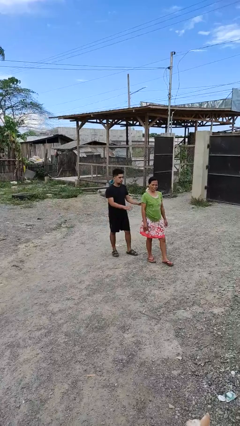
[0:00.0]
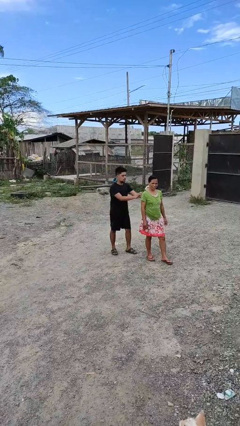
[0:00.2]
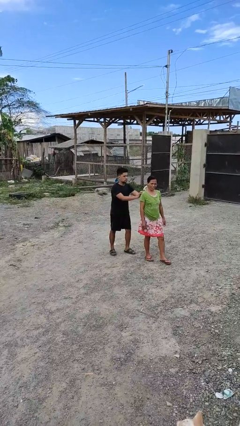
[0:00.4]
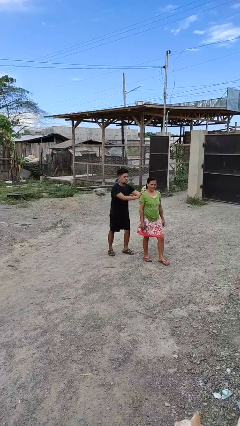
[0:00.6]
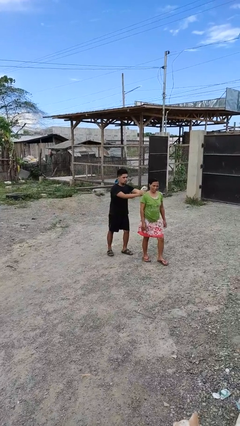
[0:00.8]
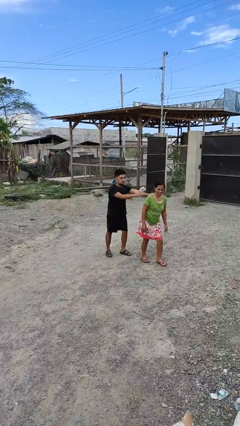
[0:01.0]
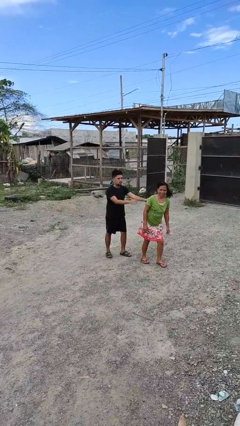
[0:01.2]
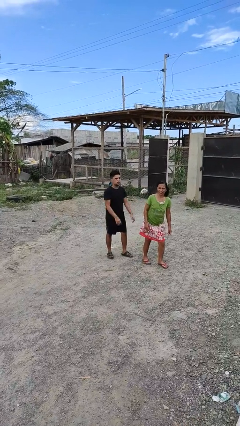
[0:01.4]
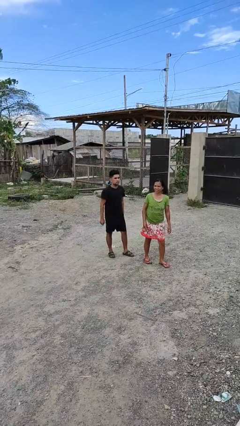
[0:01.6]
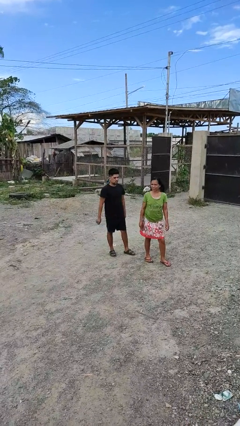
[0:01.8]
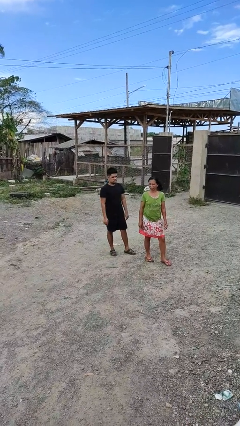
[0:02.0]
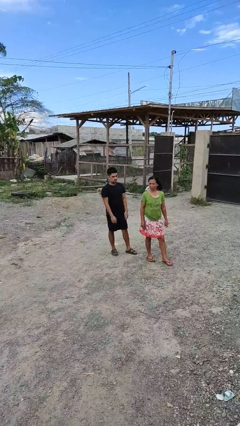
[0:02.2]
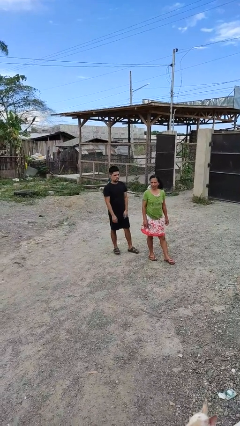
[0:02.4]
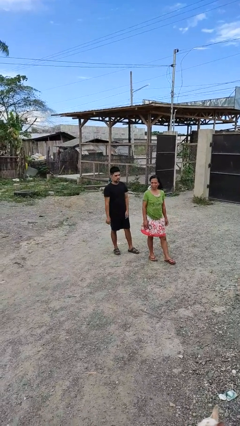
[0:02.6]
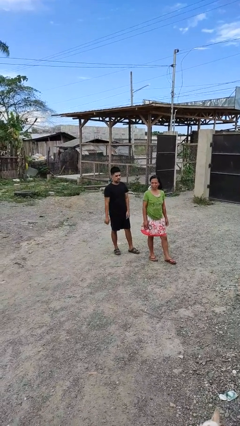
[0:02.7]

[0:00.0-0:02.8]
person shoves person

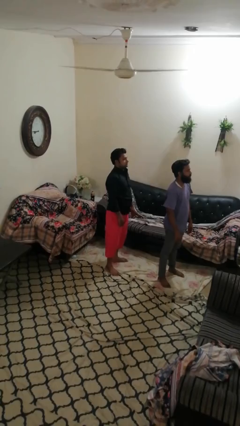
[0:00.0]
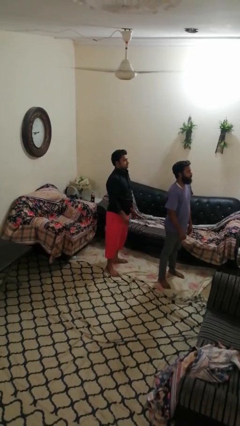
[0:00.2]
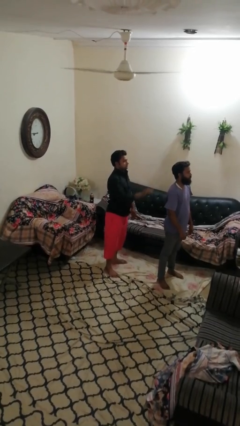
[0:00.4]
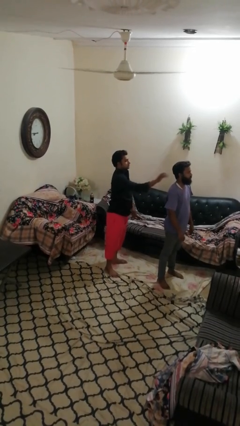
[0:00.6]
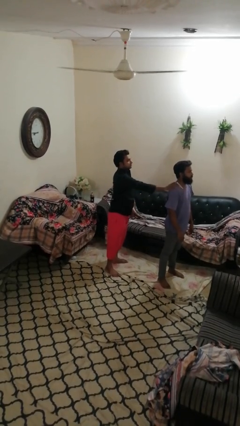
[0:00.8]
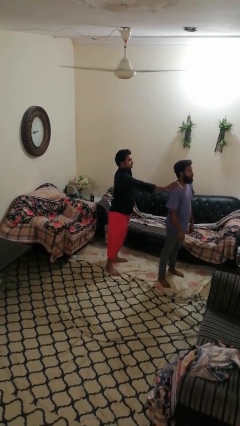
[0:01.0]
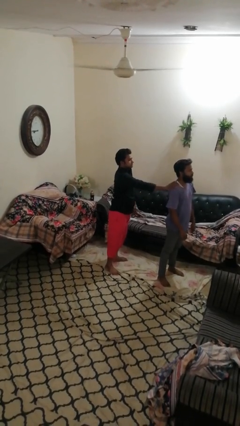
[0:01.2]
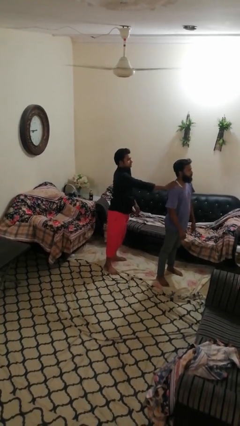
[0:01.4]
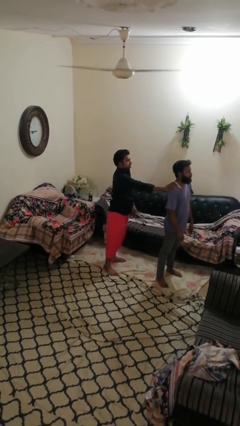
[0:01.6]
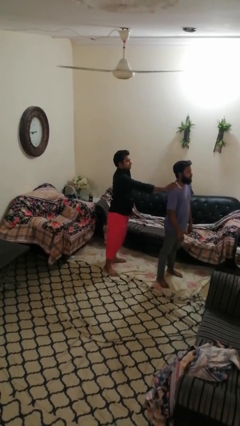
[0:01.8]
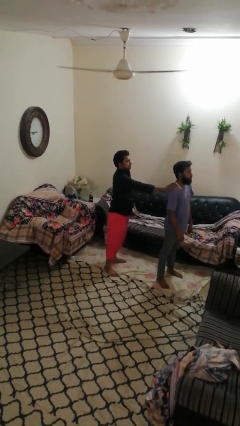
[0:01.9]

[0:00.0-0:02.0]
person grabs person by shoulder

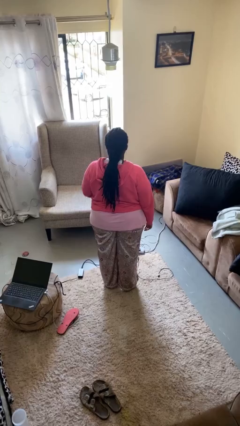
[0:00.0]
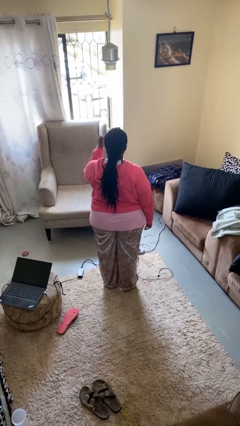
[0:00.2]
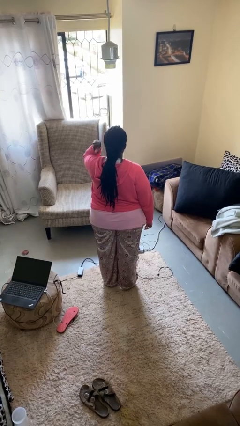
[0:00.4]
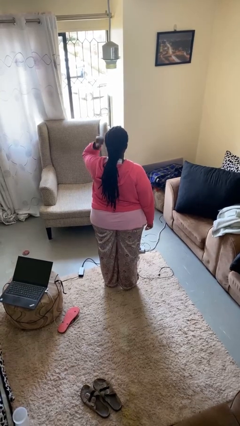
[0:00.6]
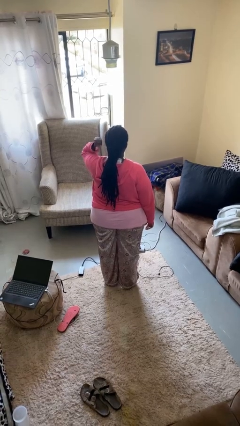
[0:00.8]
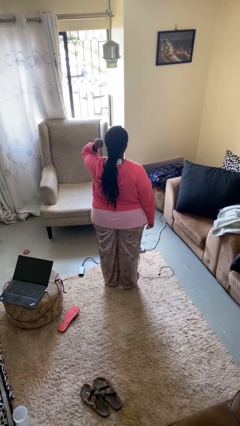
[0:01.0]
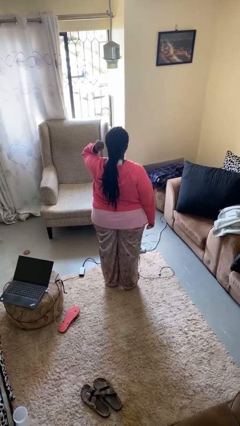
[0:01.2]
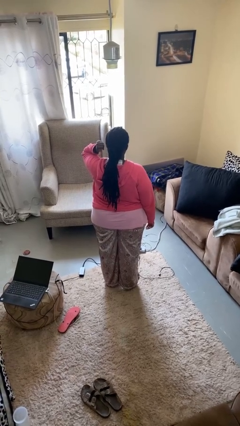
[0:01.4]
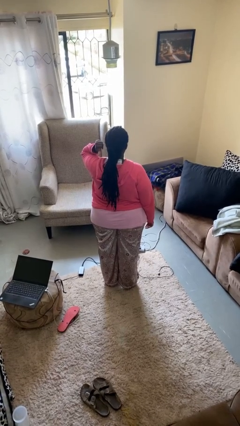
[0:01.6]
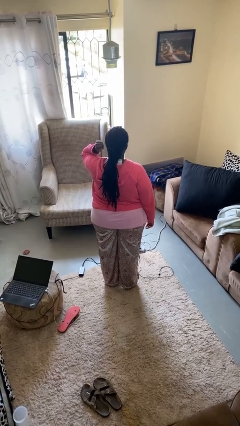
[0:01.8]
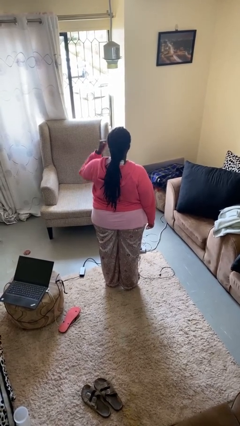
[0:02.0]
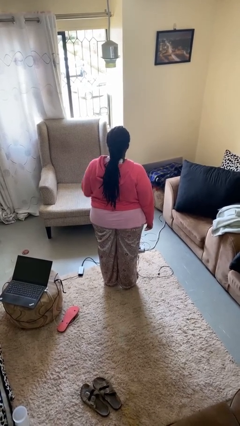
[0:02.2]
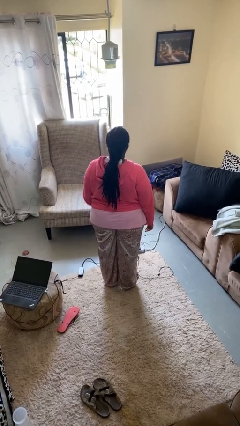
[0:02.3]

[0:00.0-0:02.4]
person gestures behind me

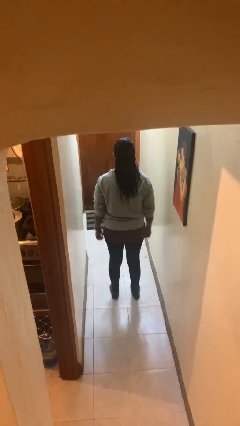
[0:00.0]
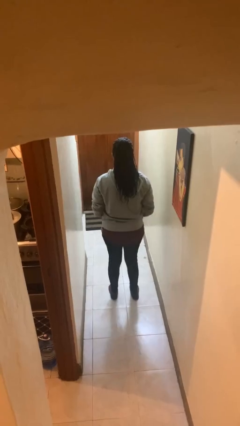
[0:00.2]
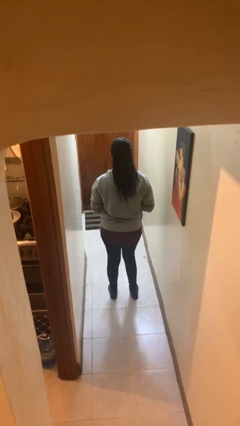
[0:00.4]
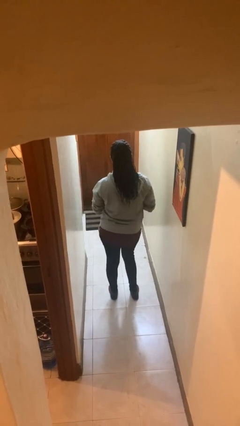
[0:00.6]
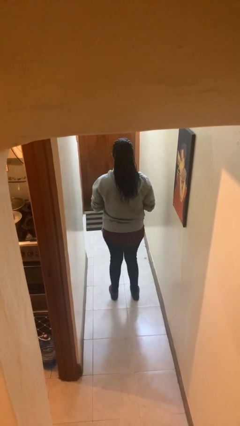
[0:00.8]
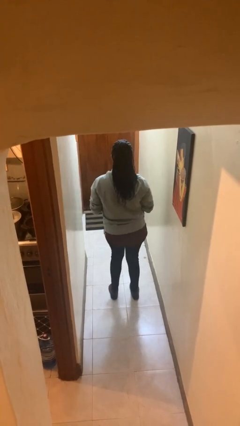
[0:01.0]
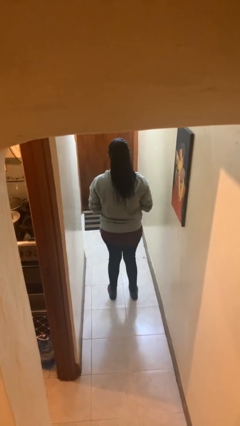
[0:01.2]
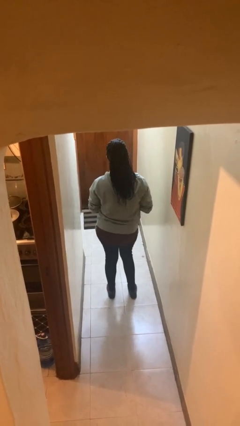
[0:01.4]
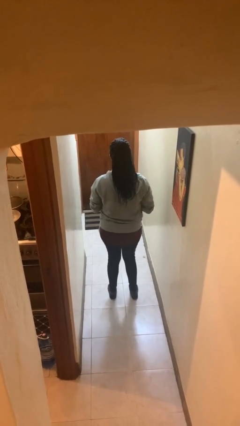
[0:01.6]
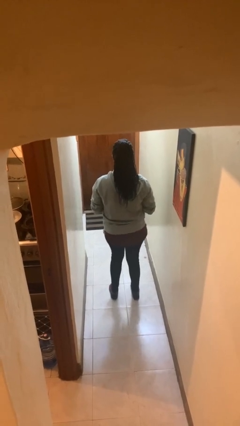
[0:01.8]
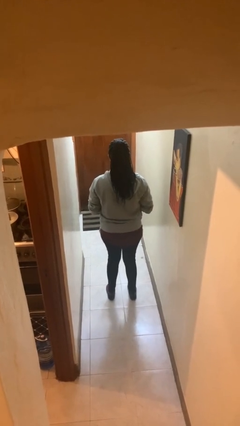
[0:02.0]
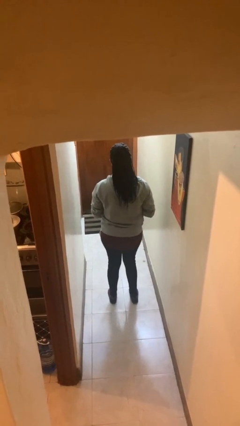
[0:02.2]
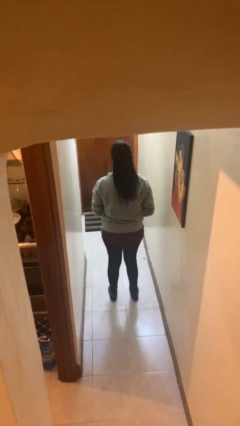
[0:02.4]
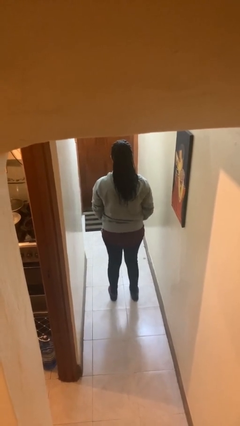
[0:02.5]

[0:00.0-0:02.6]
person wiggles hips

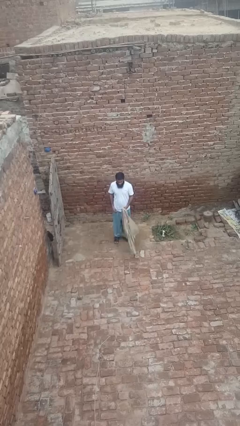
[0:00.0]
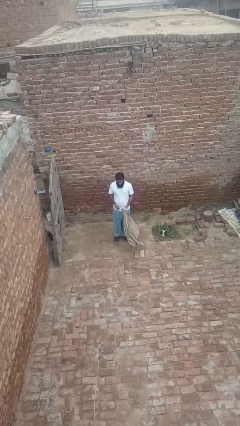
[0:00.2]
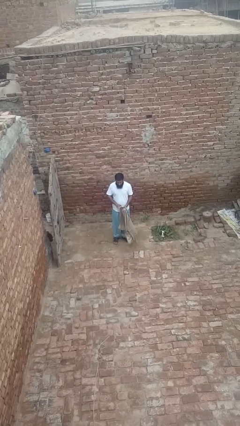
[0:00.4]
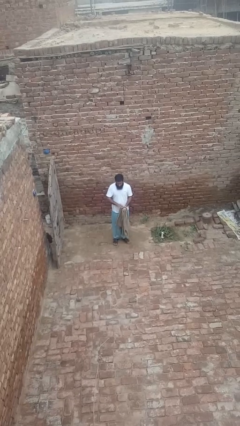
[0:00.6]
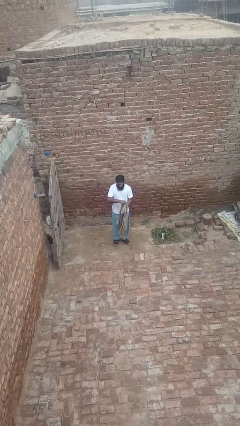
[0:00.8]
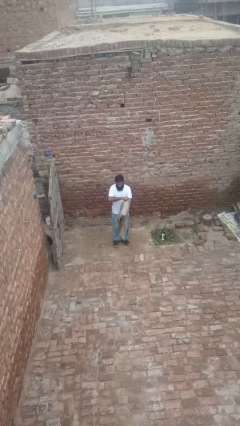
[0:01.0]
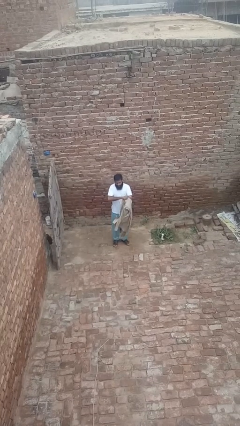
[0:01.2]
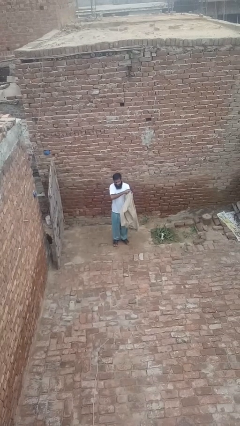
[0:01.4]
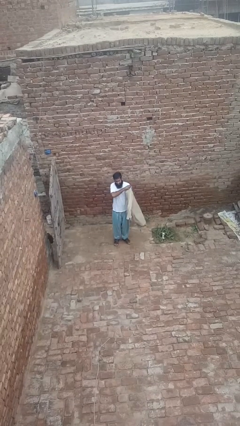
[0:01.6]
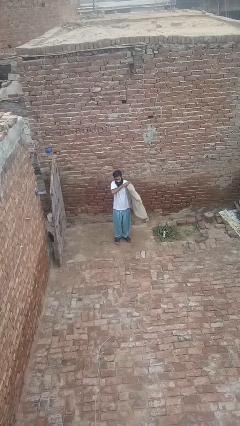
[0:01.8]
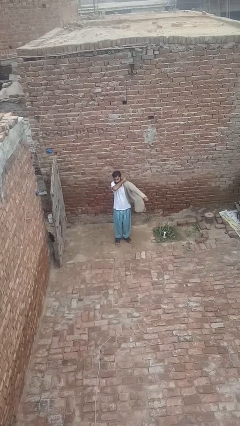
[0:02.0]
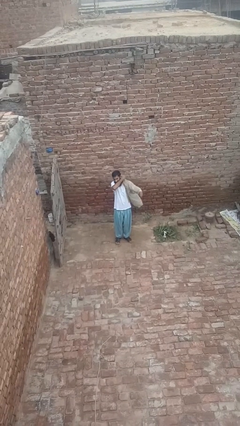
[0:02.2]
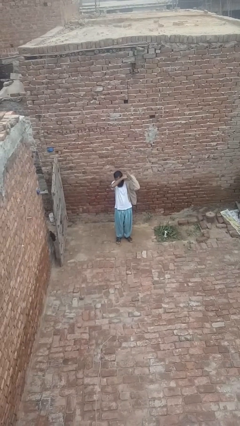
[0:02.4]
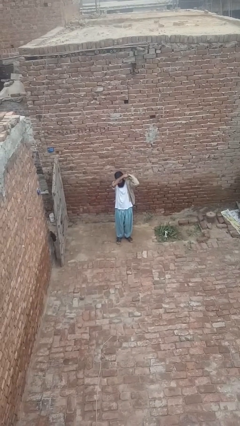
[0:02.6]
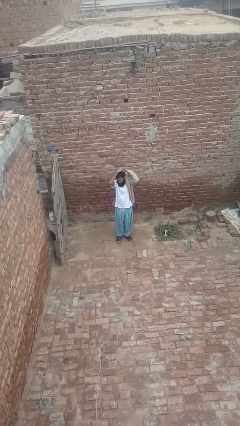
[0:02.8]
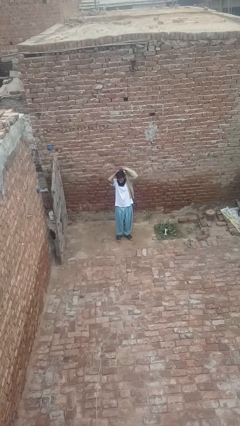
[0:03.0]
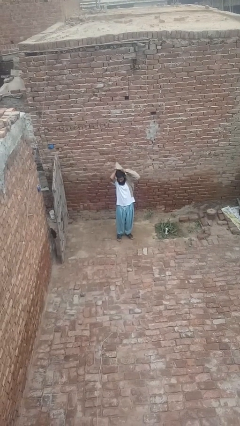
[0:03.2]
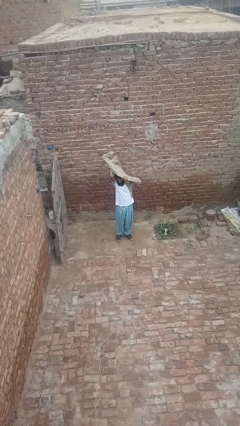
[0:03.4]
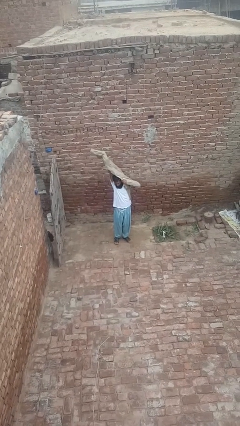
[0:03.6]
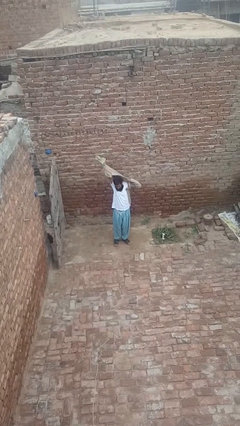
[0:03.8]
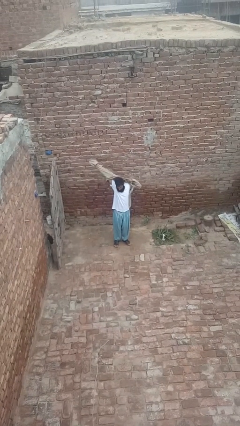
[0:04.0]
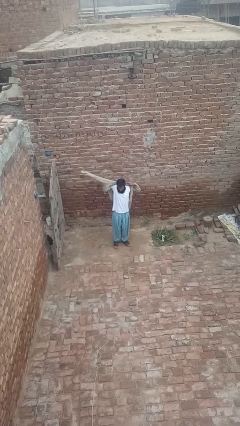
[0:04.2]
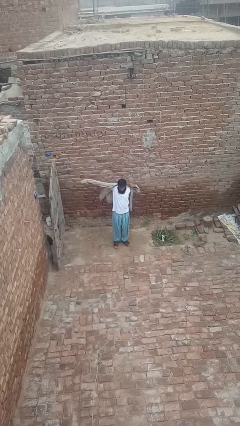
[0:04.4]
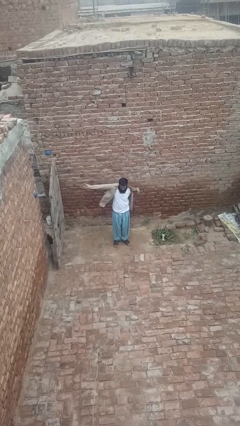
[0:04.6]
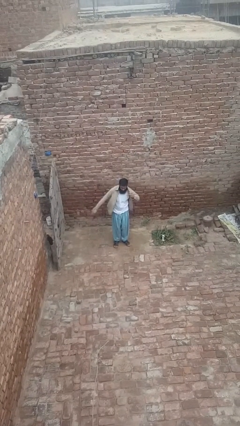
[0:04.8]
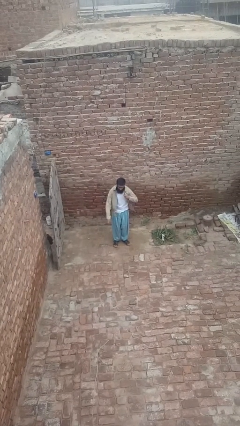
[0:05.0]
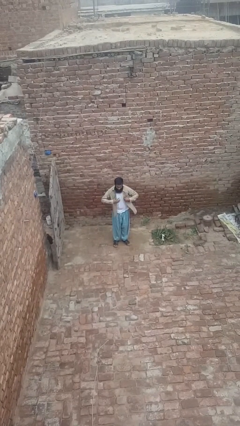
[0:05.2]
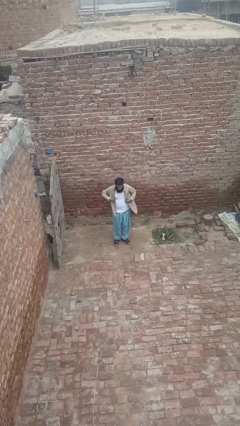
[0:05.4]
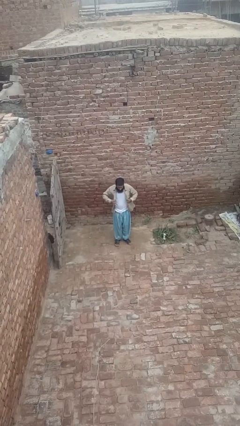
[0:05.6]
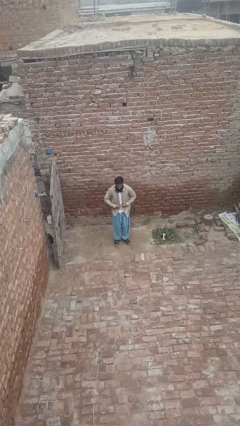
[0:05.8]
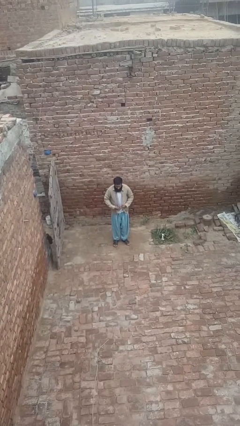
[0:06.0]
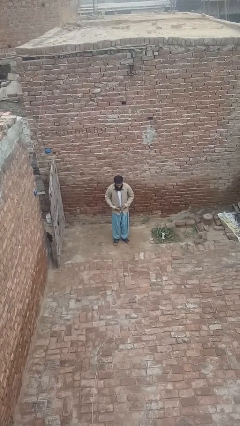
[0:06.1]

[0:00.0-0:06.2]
person puts on shirt

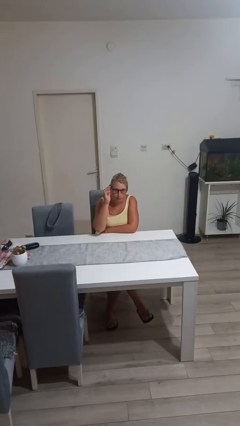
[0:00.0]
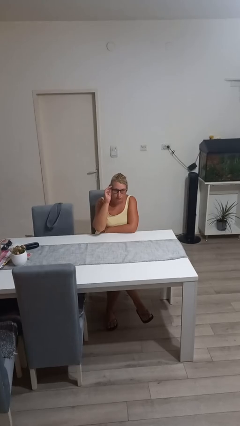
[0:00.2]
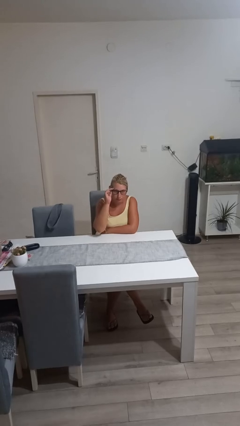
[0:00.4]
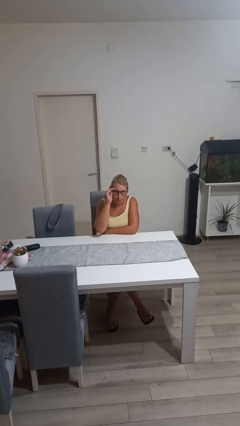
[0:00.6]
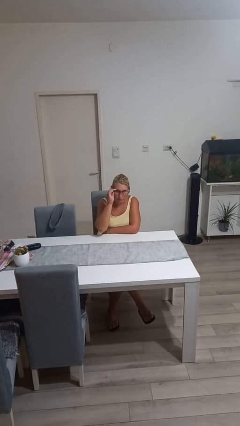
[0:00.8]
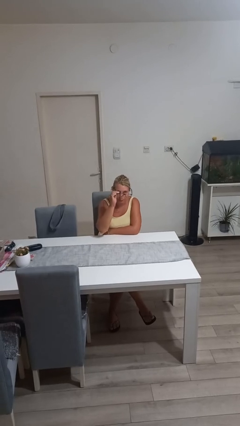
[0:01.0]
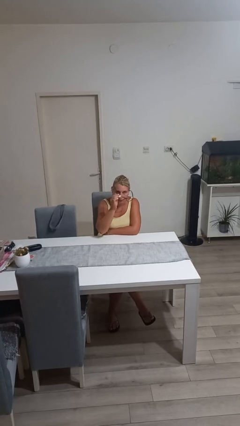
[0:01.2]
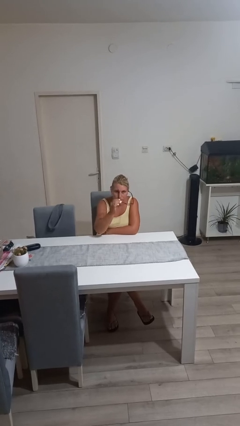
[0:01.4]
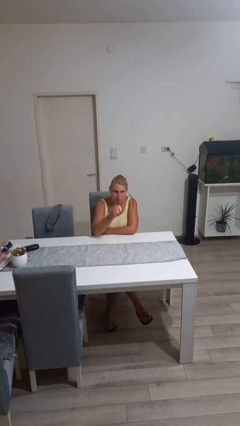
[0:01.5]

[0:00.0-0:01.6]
person takes off glasses
